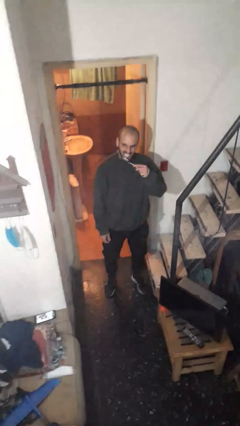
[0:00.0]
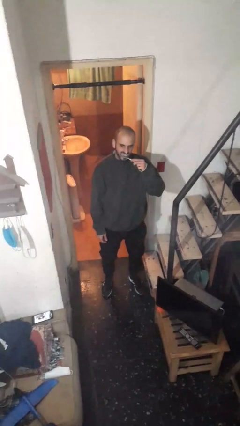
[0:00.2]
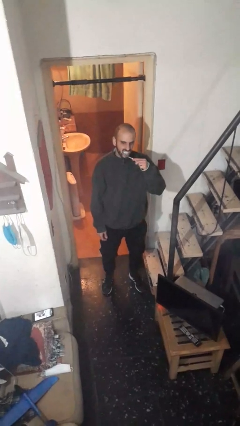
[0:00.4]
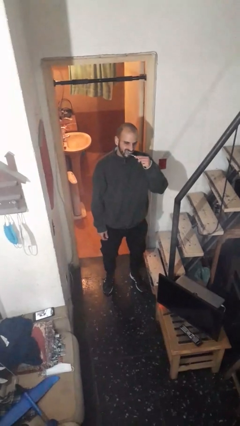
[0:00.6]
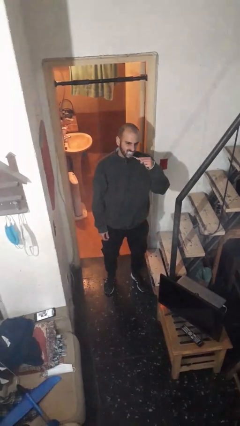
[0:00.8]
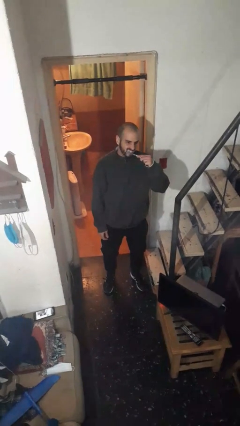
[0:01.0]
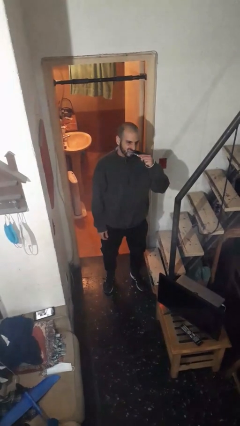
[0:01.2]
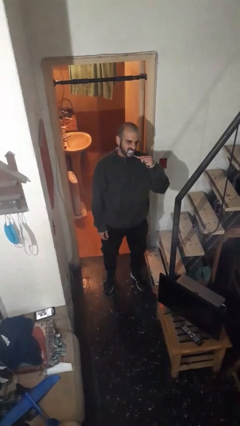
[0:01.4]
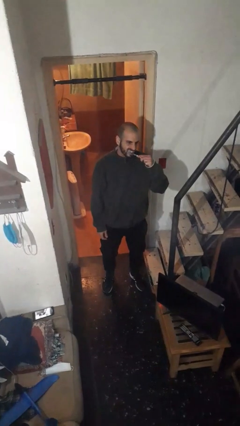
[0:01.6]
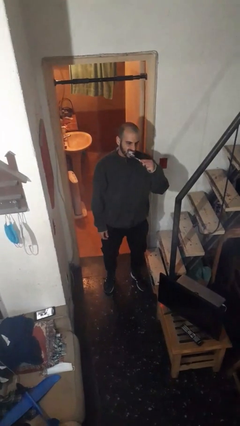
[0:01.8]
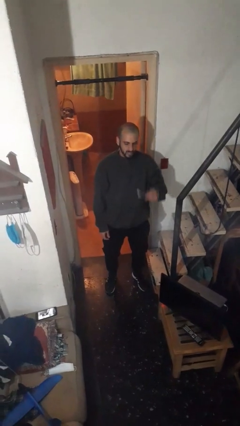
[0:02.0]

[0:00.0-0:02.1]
person brushes teeth

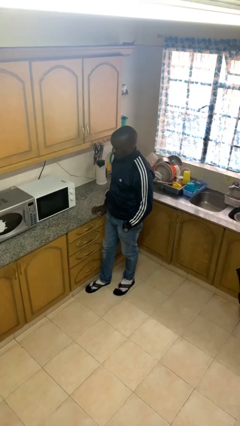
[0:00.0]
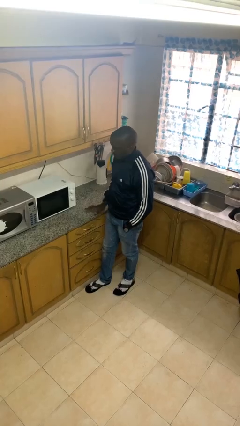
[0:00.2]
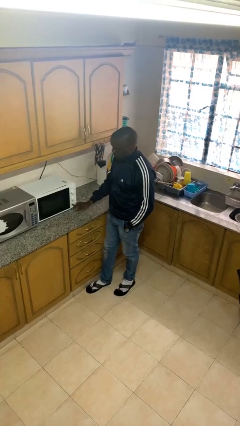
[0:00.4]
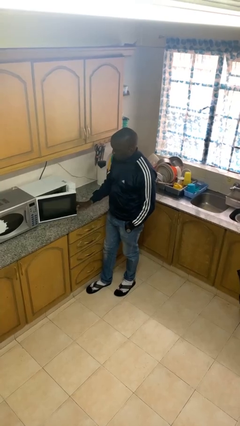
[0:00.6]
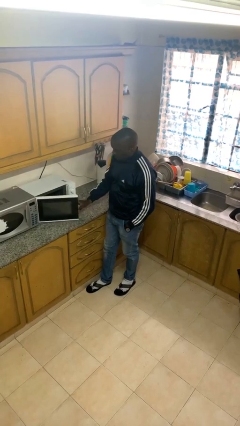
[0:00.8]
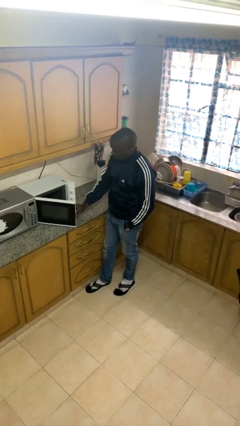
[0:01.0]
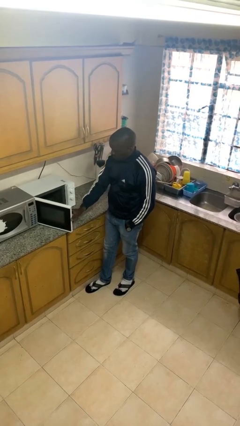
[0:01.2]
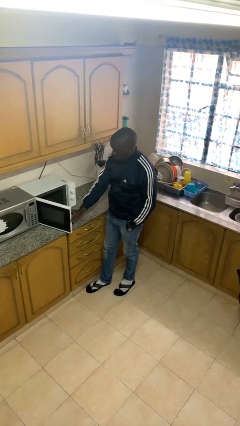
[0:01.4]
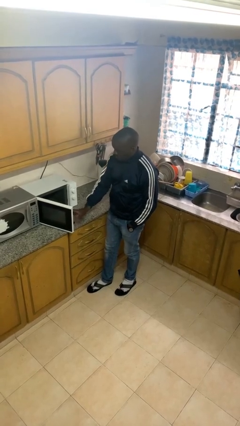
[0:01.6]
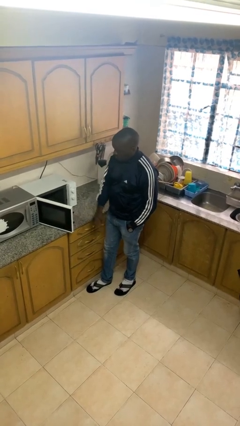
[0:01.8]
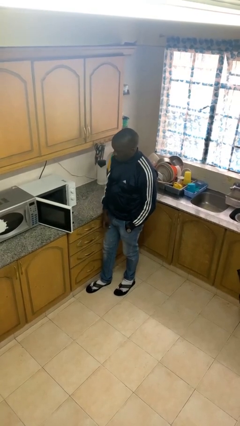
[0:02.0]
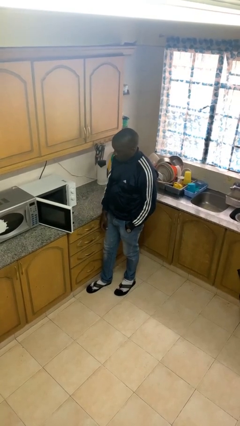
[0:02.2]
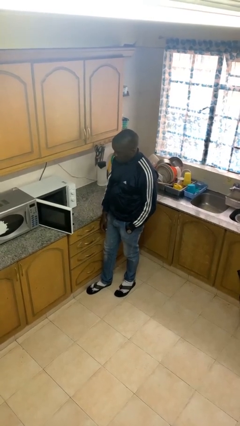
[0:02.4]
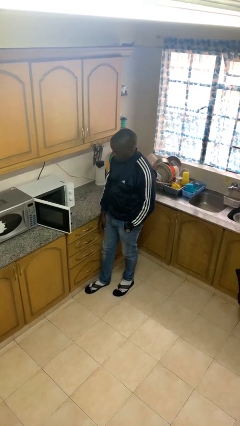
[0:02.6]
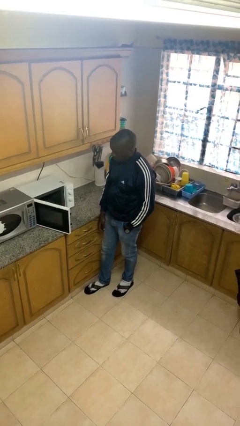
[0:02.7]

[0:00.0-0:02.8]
person opens microwave

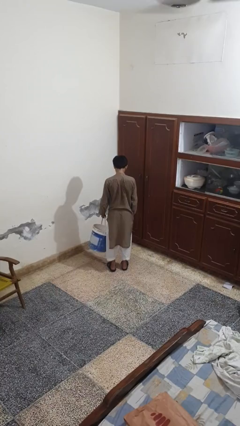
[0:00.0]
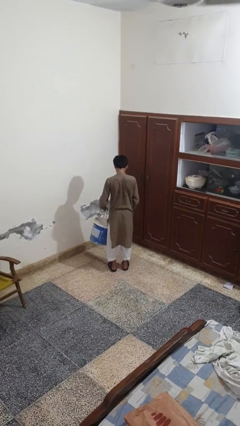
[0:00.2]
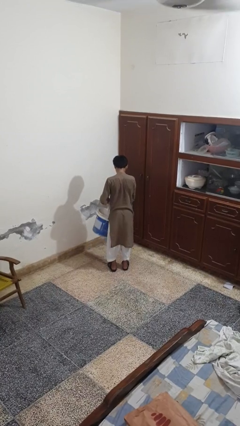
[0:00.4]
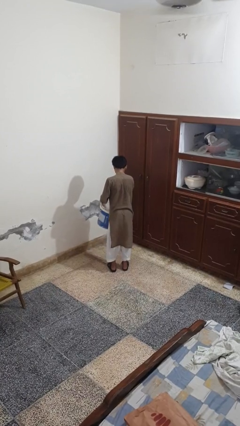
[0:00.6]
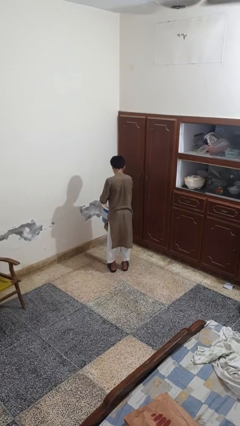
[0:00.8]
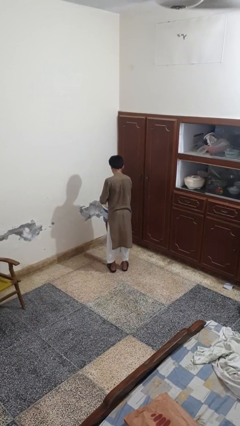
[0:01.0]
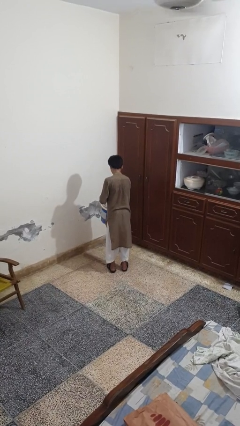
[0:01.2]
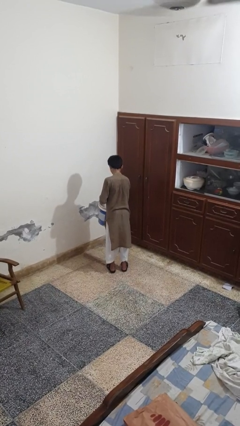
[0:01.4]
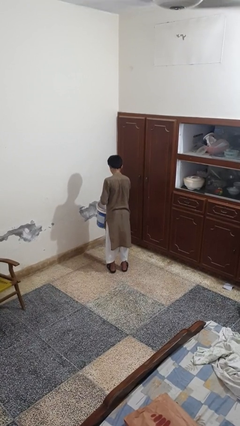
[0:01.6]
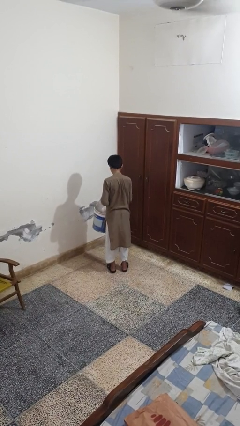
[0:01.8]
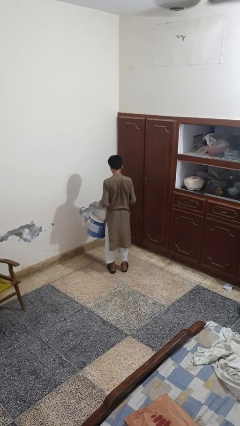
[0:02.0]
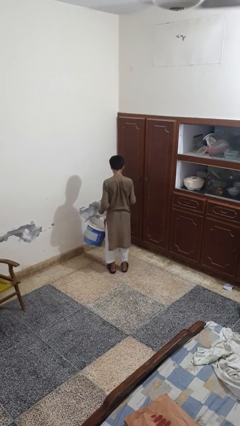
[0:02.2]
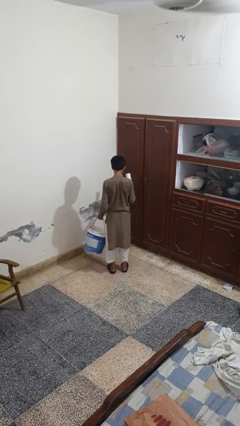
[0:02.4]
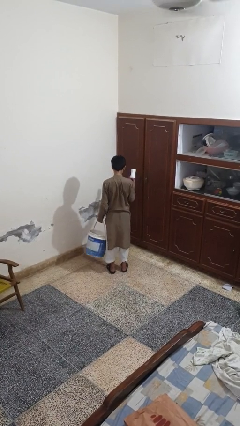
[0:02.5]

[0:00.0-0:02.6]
person takes object from basket

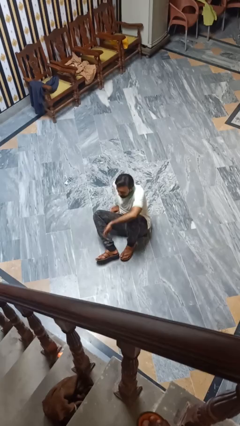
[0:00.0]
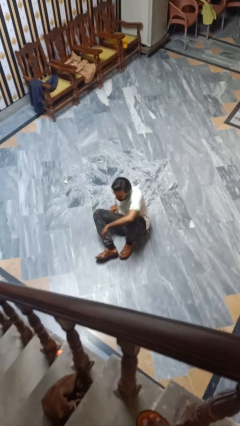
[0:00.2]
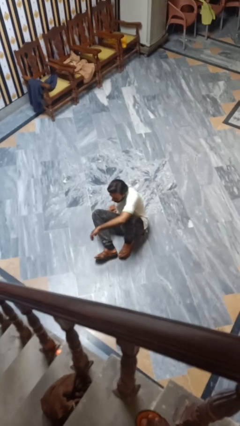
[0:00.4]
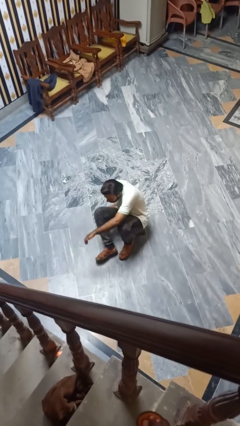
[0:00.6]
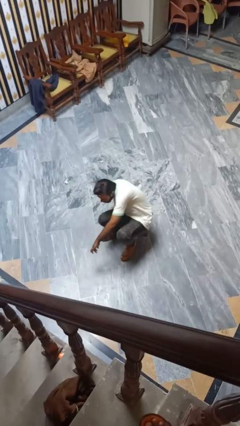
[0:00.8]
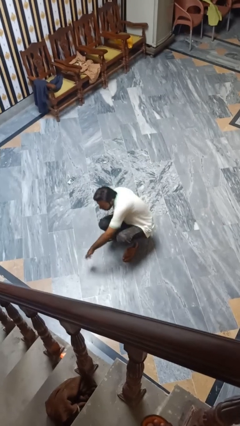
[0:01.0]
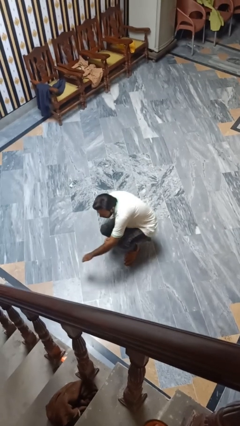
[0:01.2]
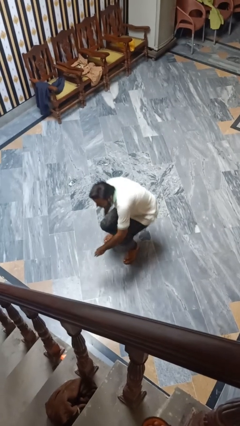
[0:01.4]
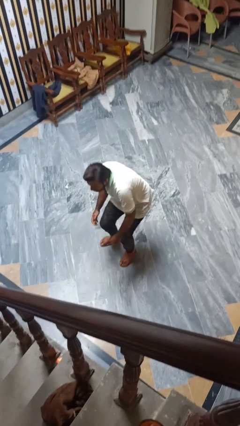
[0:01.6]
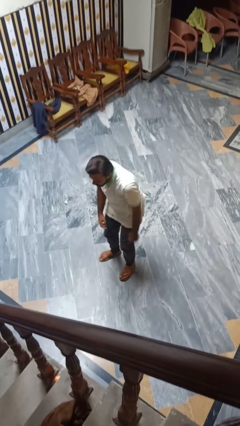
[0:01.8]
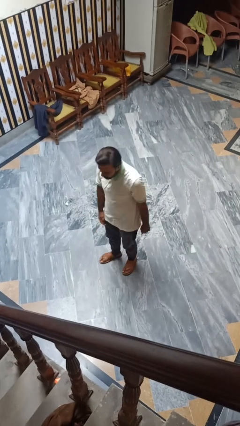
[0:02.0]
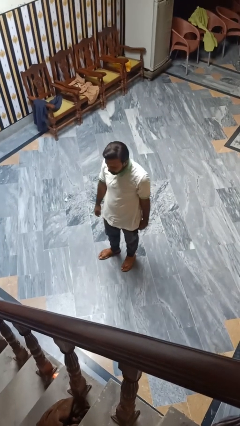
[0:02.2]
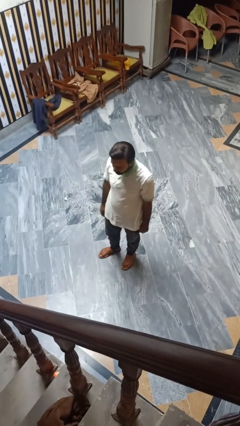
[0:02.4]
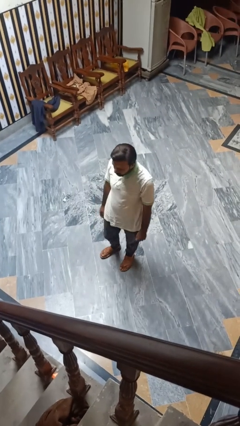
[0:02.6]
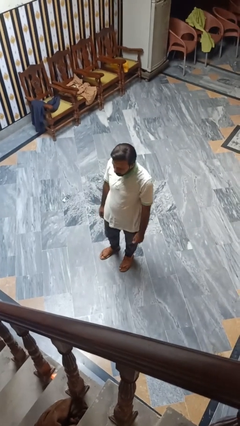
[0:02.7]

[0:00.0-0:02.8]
person stands up from floor

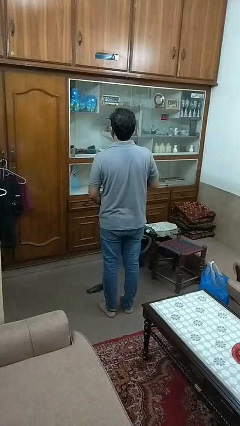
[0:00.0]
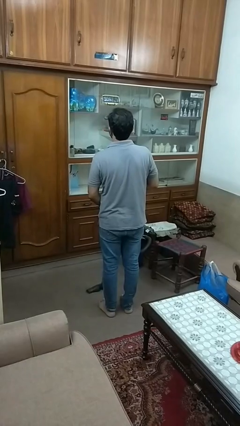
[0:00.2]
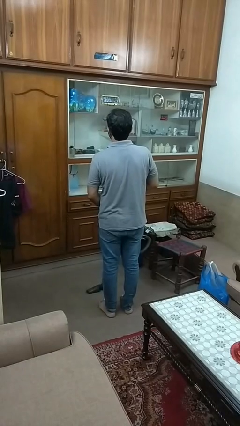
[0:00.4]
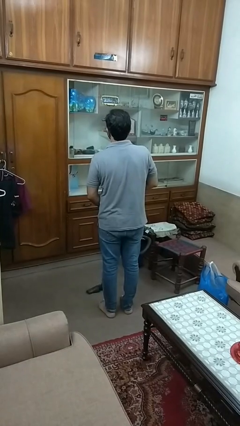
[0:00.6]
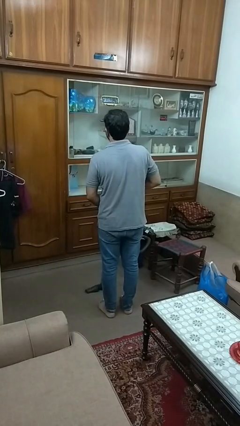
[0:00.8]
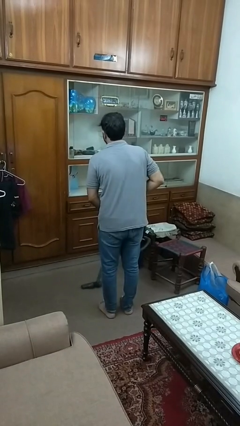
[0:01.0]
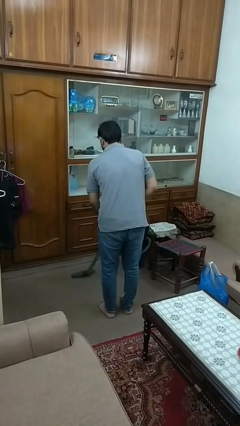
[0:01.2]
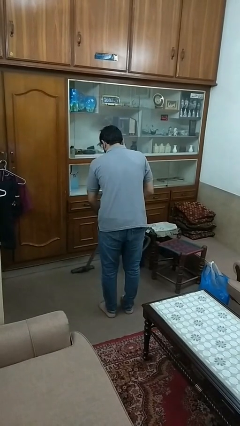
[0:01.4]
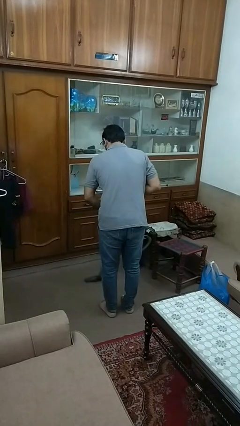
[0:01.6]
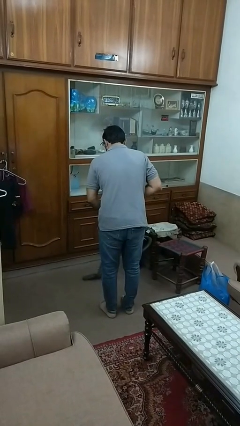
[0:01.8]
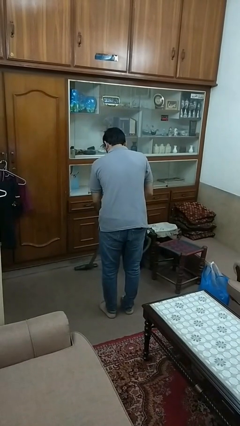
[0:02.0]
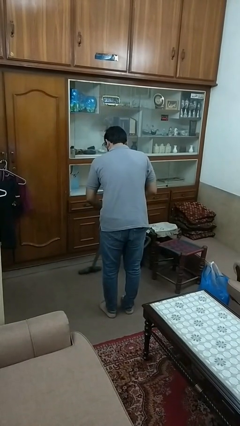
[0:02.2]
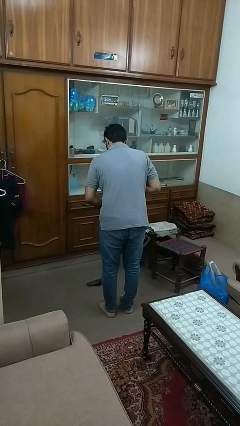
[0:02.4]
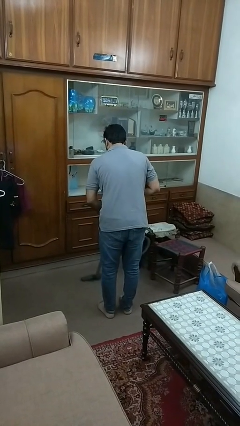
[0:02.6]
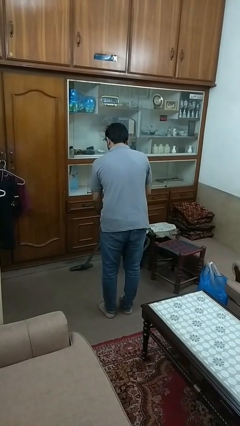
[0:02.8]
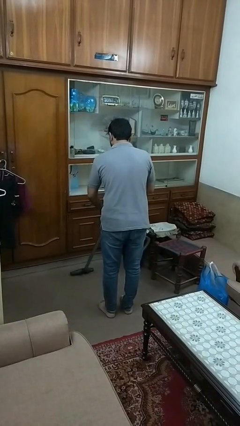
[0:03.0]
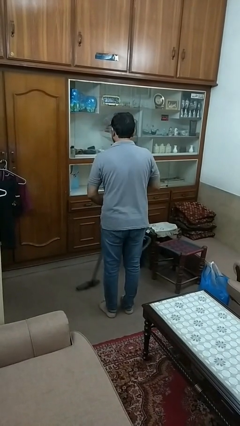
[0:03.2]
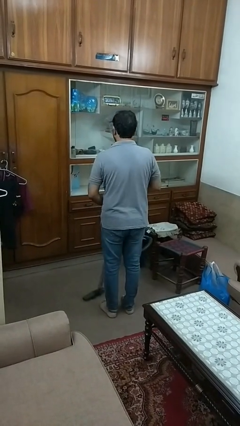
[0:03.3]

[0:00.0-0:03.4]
person vacuums carpet

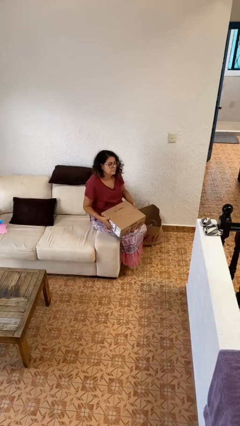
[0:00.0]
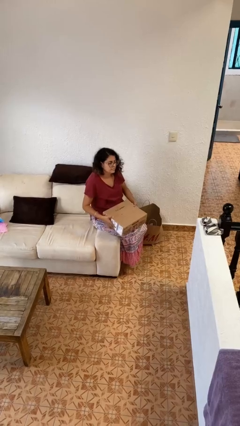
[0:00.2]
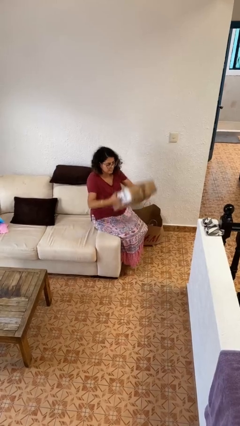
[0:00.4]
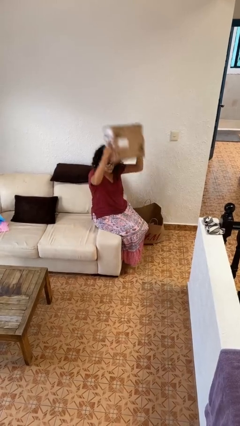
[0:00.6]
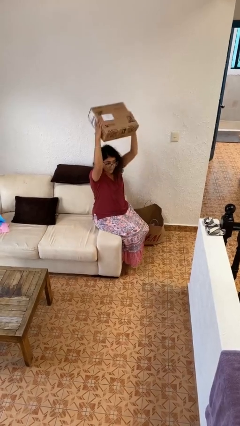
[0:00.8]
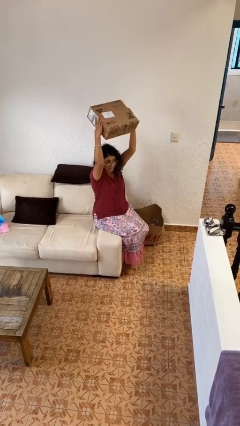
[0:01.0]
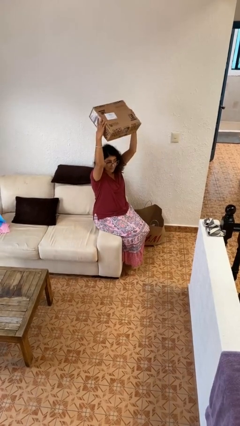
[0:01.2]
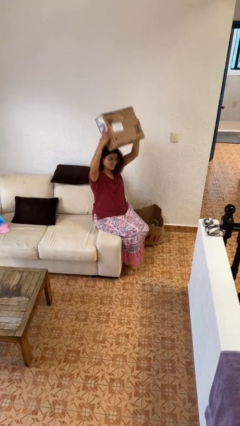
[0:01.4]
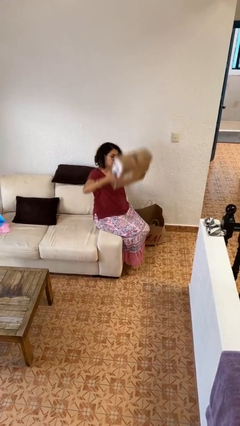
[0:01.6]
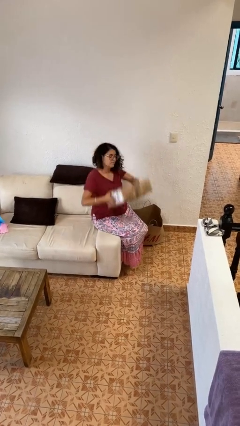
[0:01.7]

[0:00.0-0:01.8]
person holds object above head

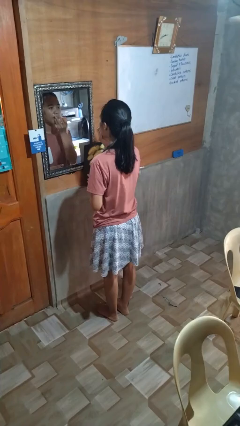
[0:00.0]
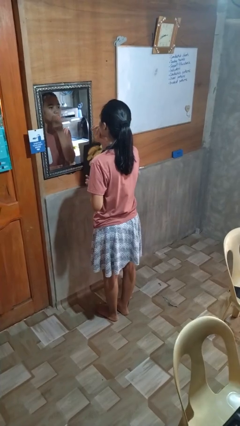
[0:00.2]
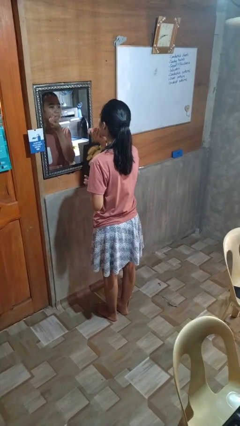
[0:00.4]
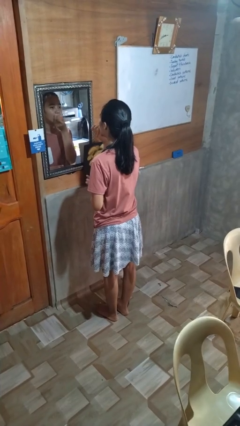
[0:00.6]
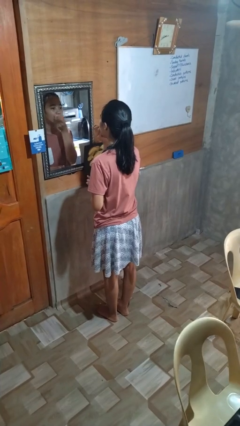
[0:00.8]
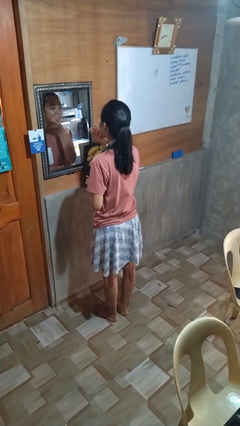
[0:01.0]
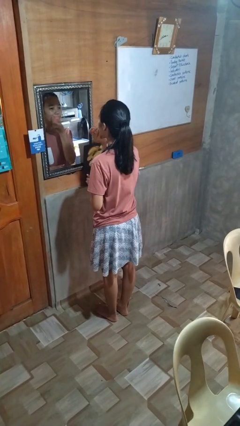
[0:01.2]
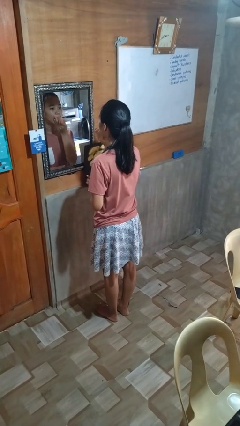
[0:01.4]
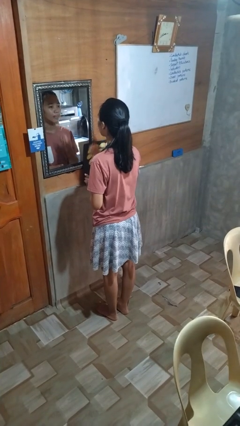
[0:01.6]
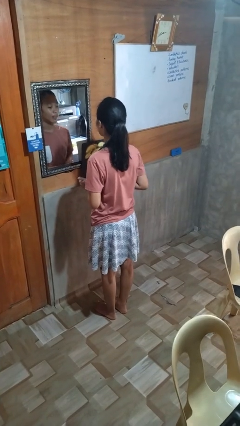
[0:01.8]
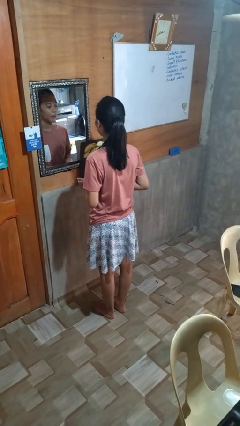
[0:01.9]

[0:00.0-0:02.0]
person applies lip makeup
